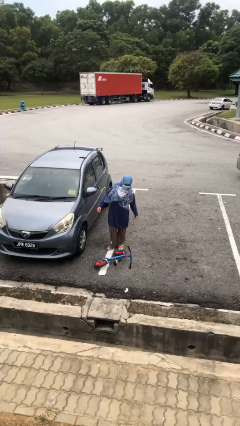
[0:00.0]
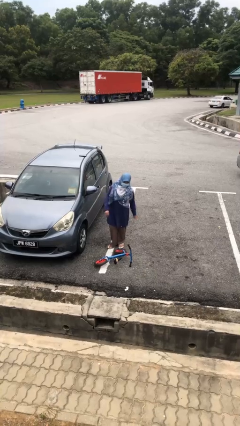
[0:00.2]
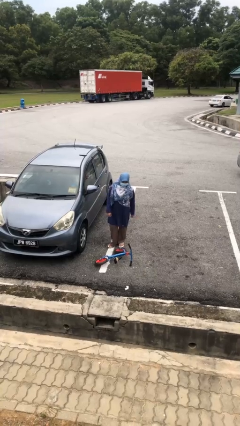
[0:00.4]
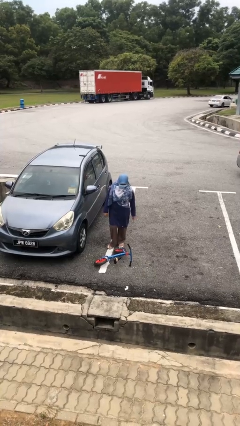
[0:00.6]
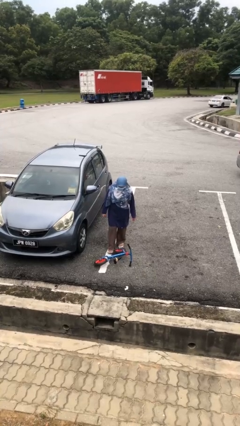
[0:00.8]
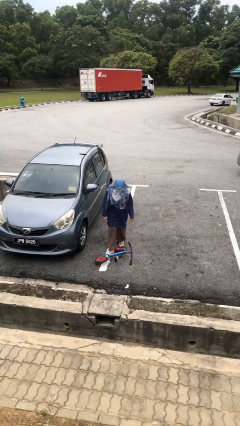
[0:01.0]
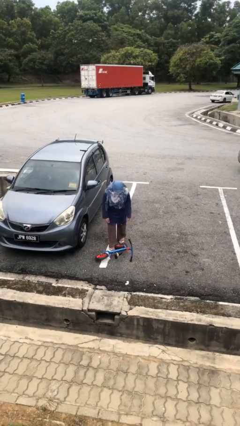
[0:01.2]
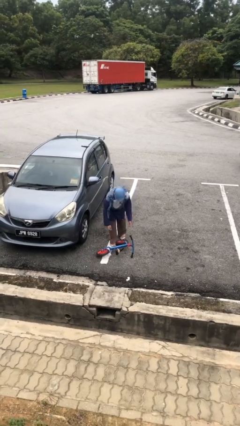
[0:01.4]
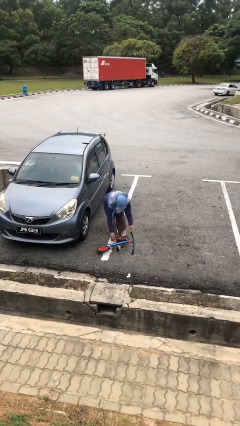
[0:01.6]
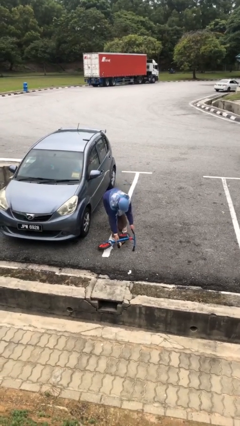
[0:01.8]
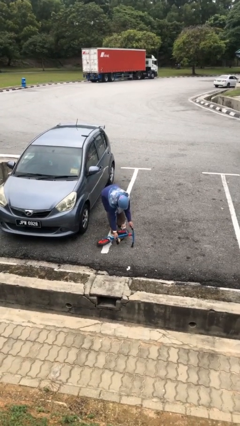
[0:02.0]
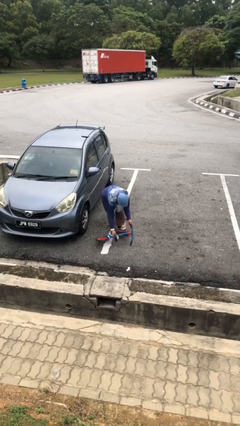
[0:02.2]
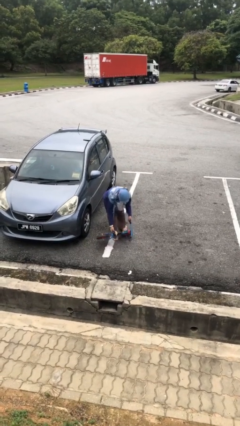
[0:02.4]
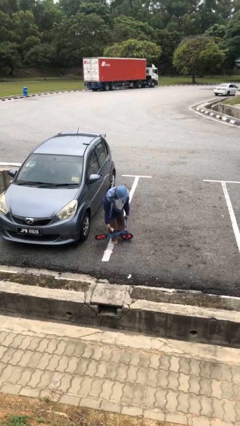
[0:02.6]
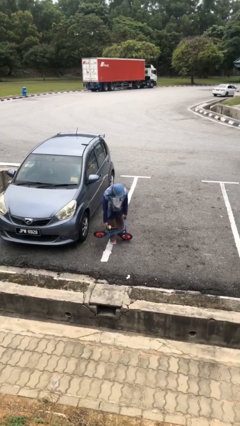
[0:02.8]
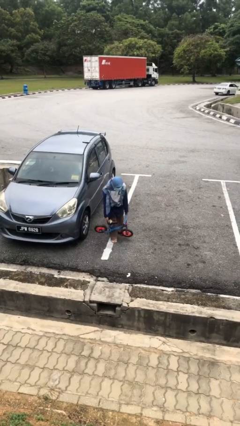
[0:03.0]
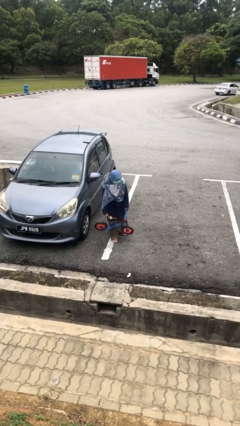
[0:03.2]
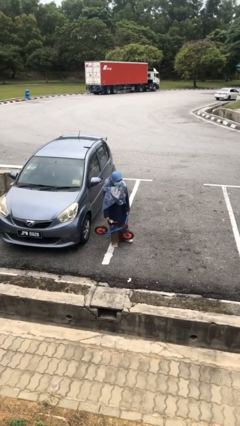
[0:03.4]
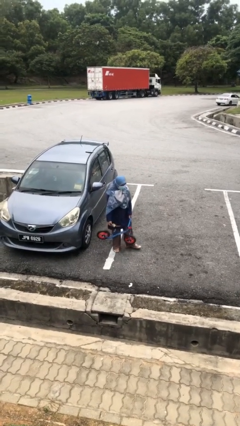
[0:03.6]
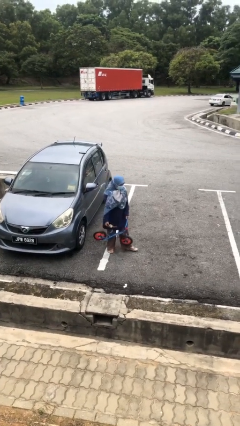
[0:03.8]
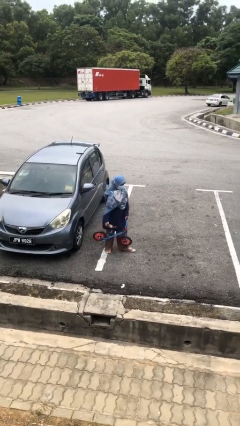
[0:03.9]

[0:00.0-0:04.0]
person picks up object from floor

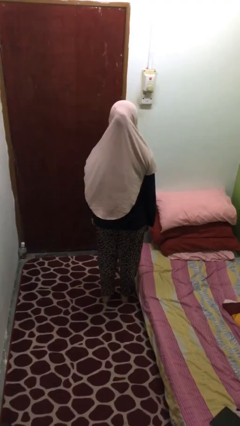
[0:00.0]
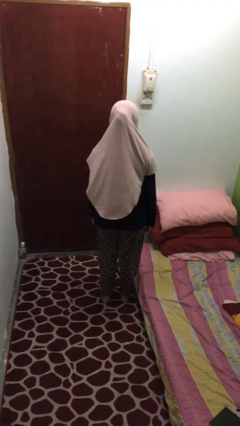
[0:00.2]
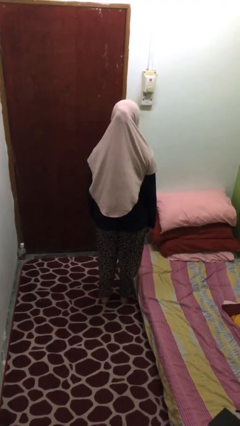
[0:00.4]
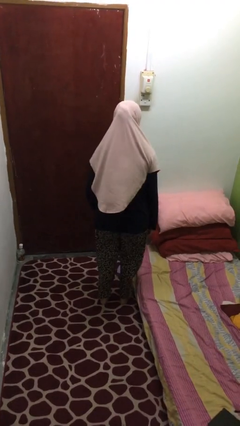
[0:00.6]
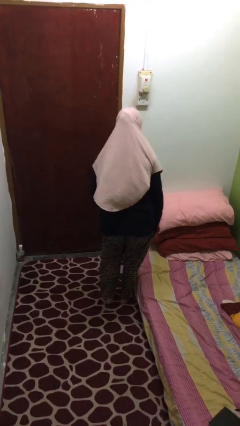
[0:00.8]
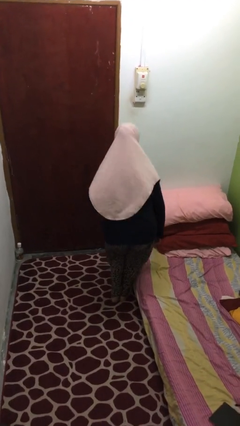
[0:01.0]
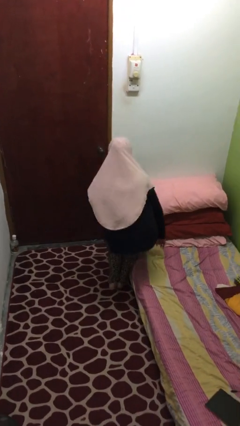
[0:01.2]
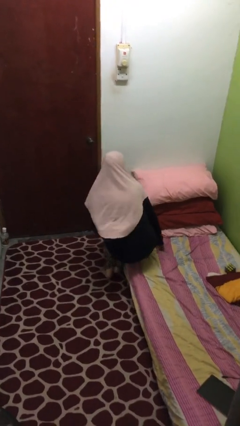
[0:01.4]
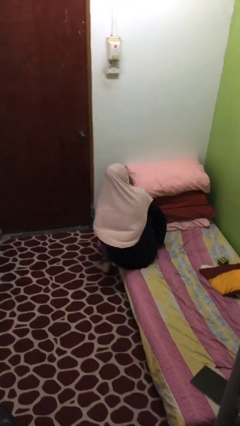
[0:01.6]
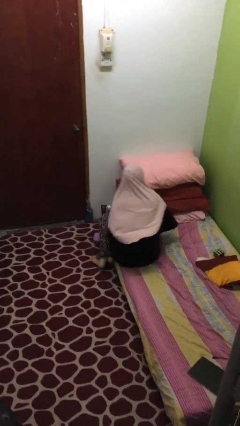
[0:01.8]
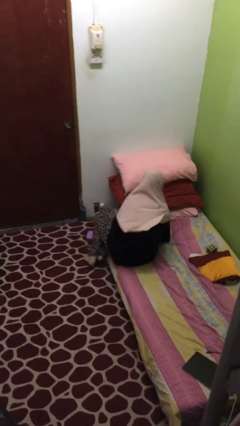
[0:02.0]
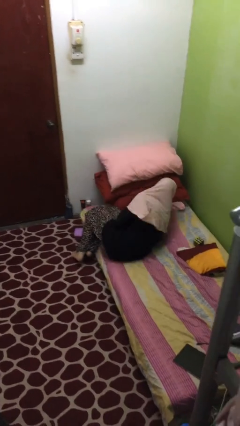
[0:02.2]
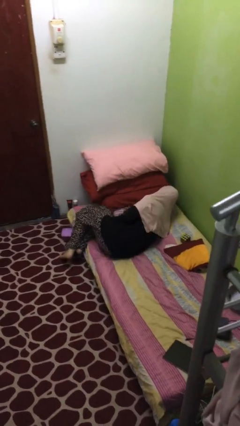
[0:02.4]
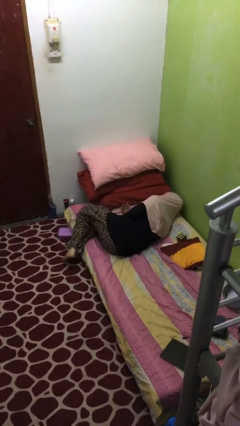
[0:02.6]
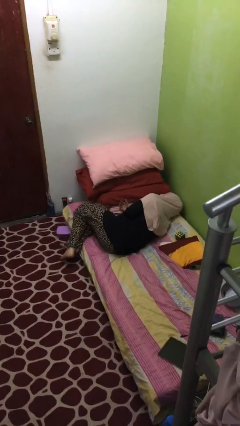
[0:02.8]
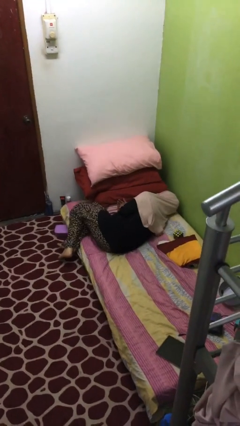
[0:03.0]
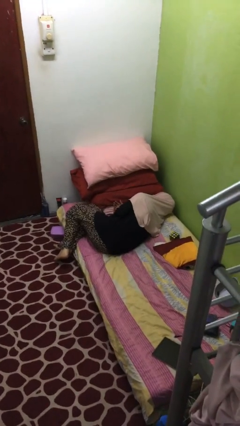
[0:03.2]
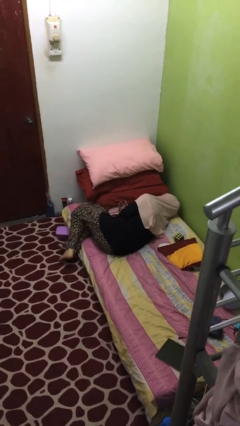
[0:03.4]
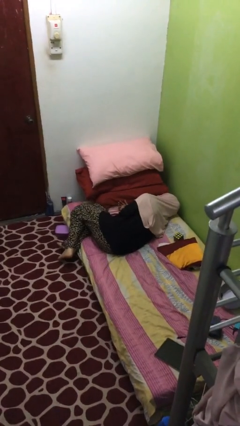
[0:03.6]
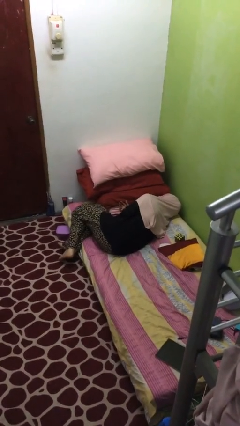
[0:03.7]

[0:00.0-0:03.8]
person lies down on bed

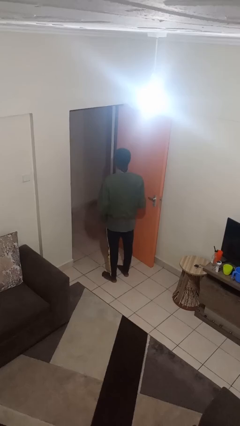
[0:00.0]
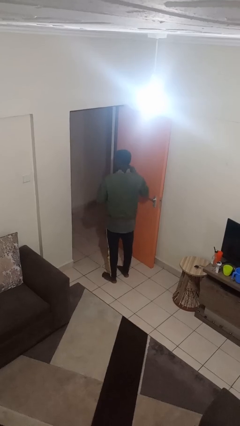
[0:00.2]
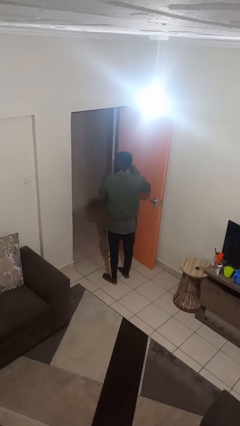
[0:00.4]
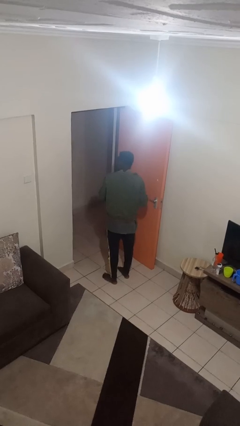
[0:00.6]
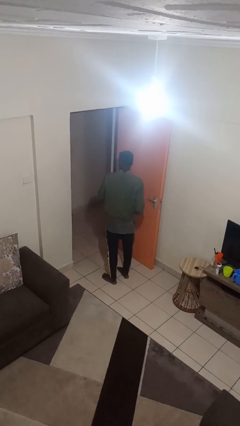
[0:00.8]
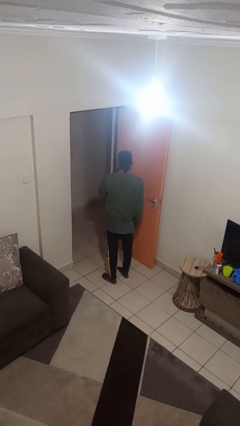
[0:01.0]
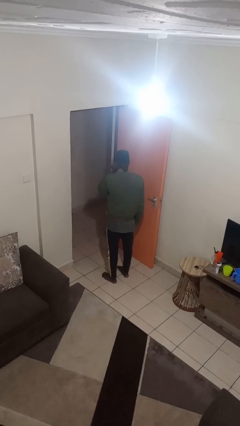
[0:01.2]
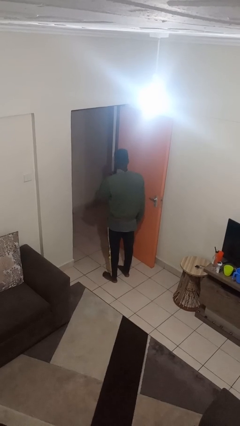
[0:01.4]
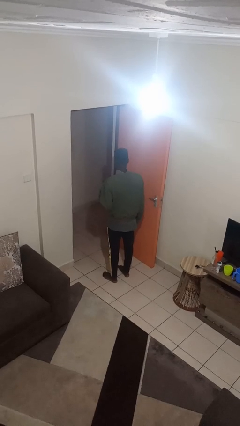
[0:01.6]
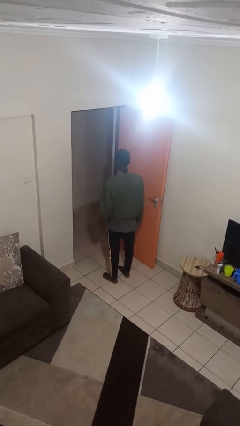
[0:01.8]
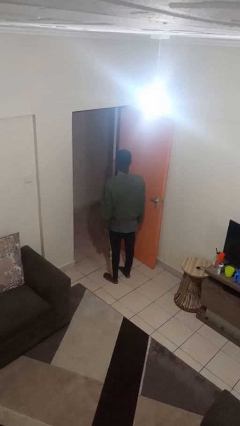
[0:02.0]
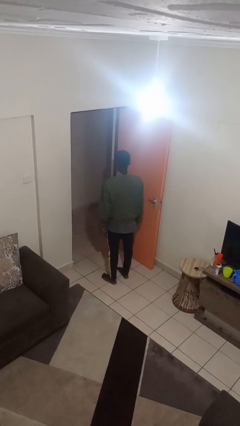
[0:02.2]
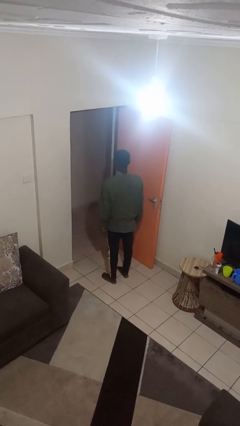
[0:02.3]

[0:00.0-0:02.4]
person takes off earrings

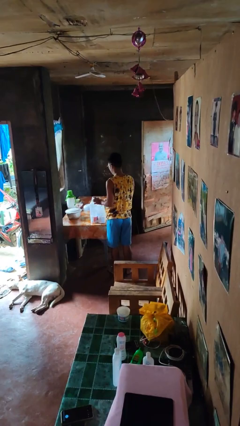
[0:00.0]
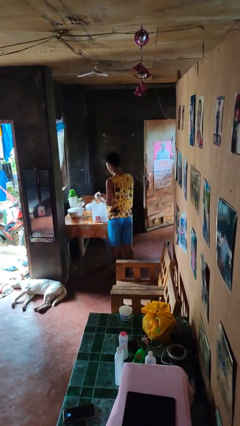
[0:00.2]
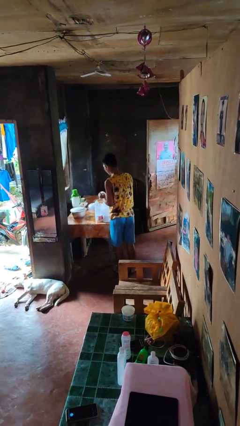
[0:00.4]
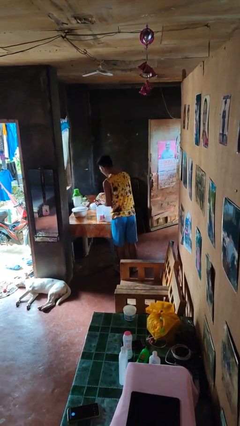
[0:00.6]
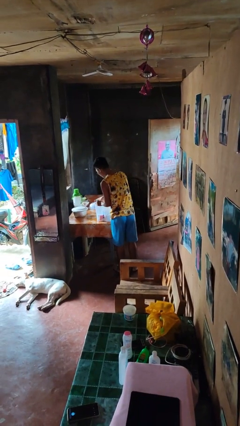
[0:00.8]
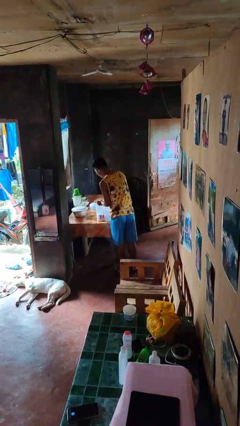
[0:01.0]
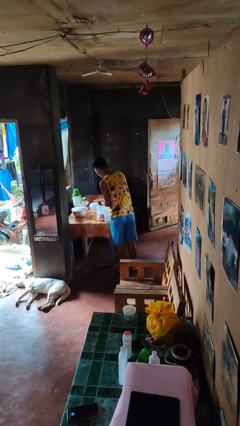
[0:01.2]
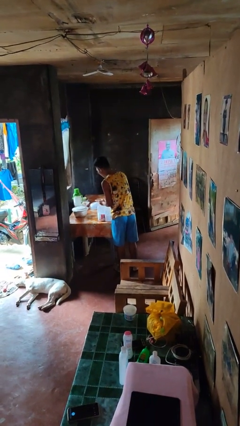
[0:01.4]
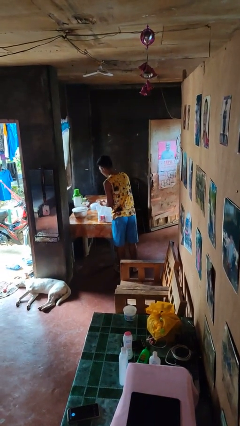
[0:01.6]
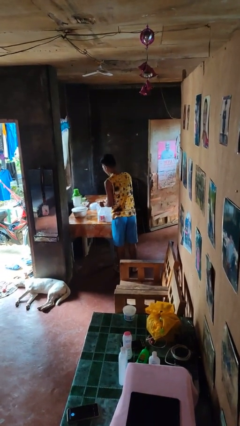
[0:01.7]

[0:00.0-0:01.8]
person puts object into bag

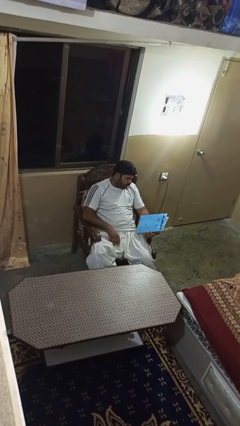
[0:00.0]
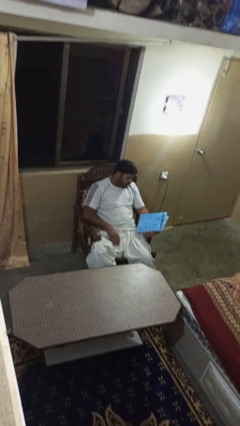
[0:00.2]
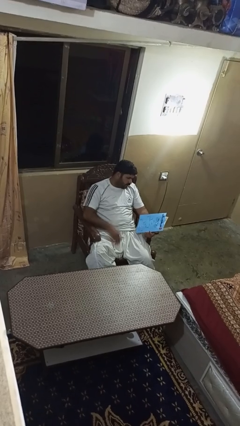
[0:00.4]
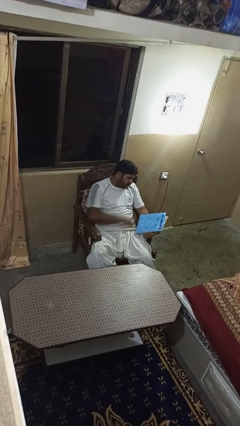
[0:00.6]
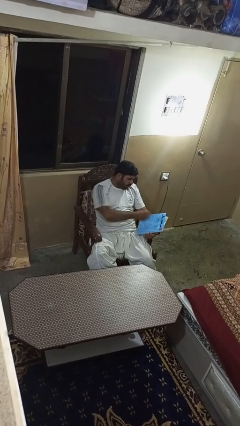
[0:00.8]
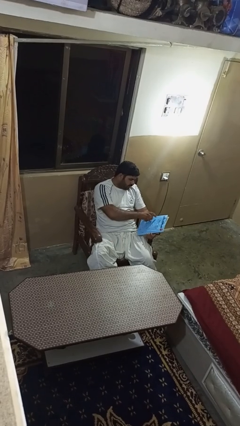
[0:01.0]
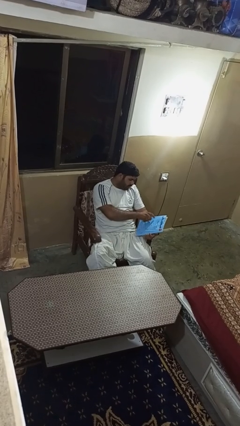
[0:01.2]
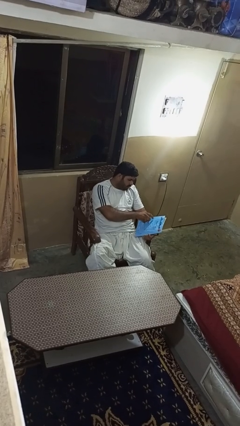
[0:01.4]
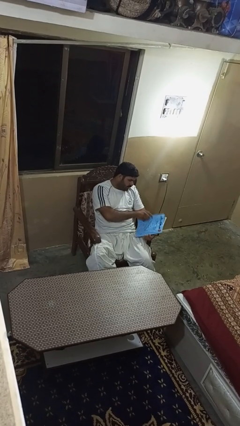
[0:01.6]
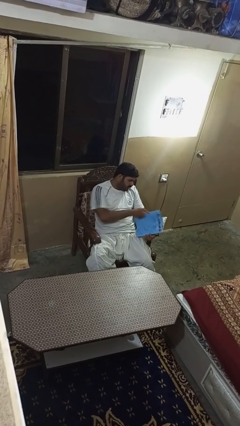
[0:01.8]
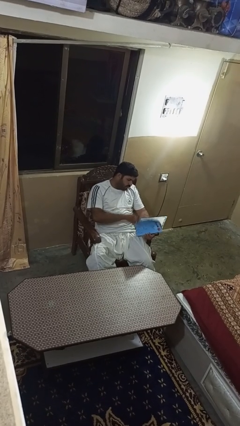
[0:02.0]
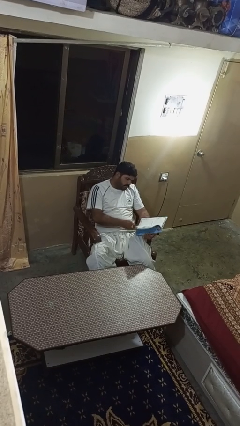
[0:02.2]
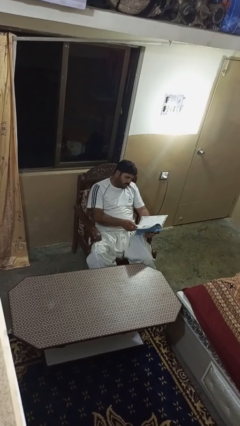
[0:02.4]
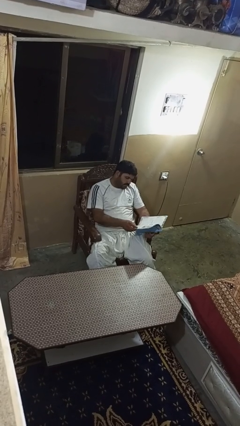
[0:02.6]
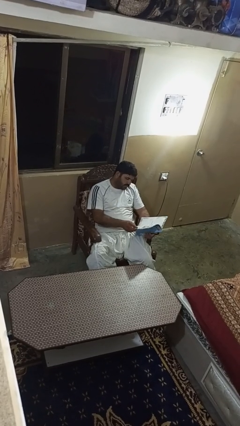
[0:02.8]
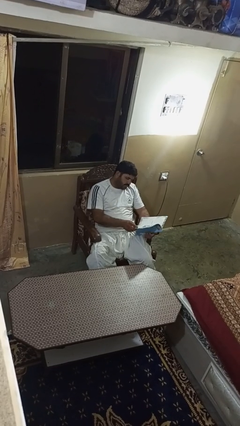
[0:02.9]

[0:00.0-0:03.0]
person reads magazine

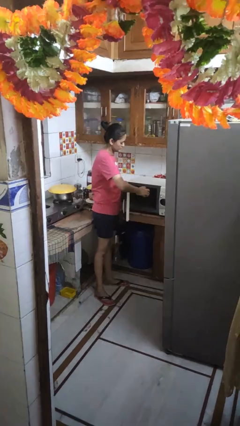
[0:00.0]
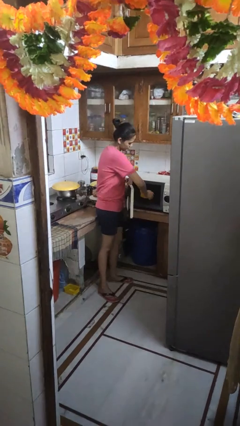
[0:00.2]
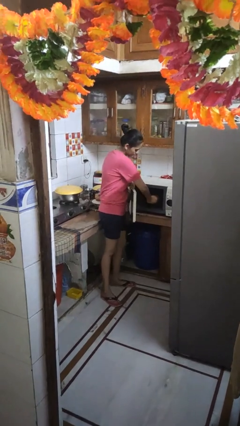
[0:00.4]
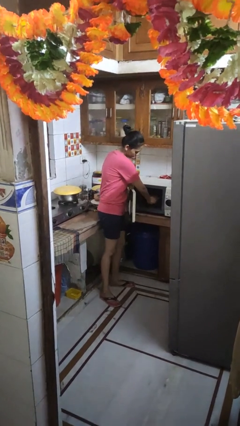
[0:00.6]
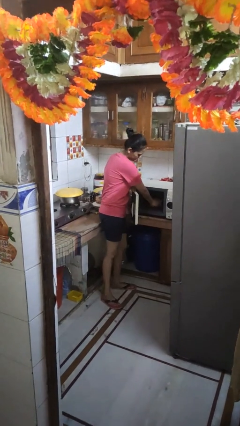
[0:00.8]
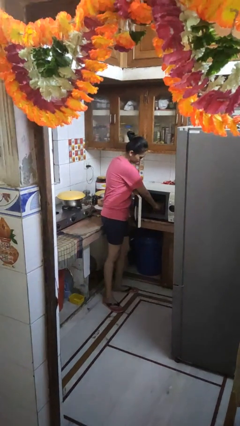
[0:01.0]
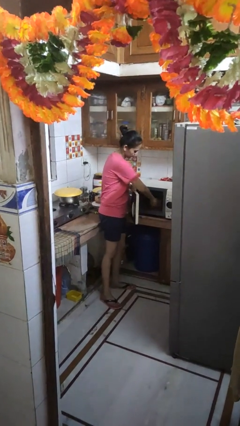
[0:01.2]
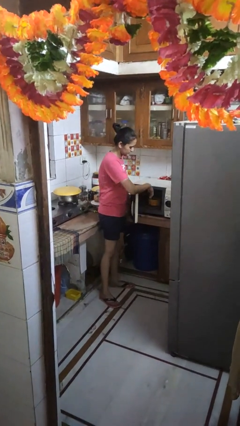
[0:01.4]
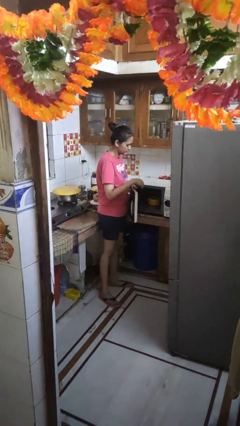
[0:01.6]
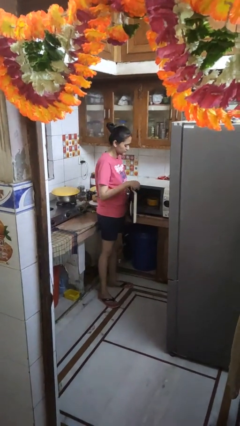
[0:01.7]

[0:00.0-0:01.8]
person puts object into microwave

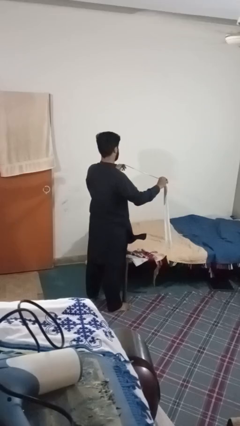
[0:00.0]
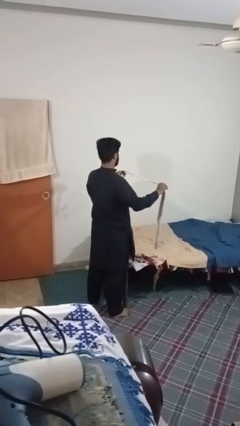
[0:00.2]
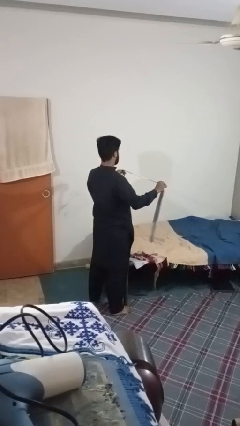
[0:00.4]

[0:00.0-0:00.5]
person puts on necktie
